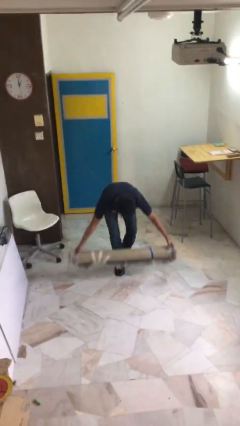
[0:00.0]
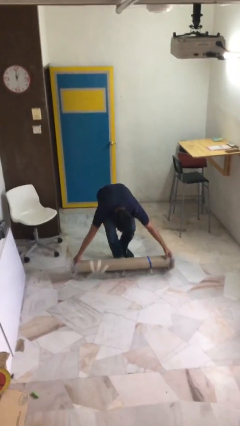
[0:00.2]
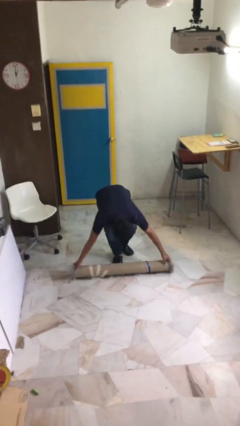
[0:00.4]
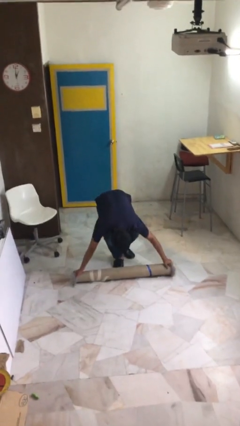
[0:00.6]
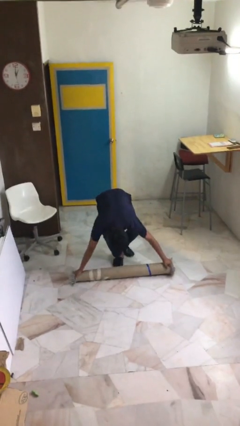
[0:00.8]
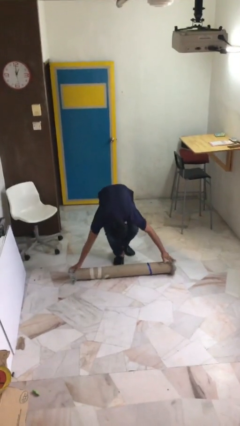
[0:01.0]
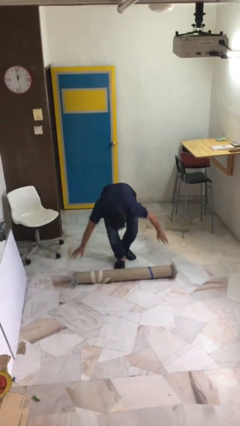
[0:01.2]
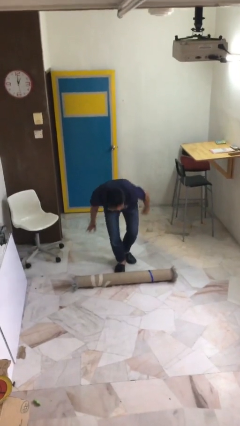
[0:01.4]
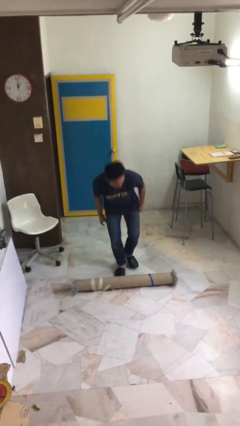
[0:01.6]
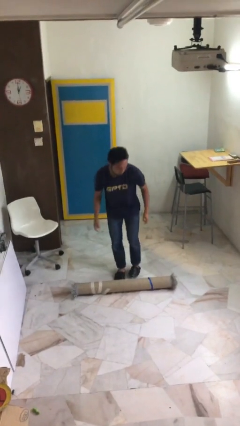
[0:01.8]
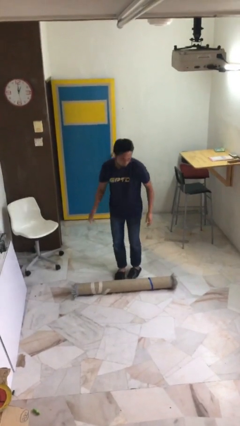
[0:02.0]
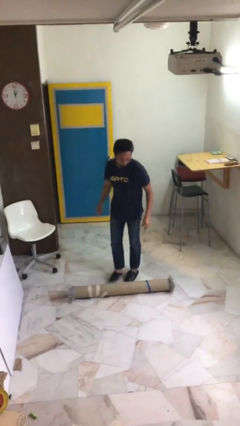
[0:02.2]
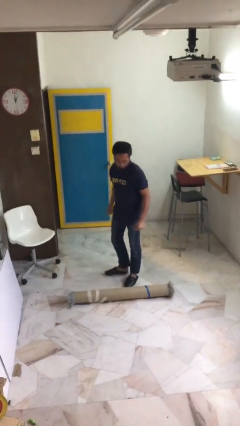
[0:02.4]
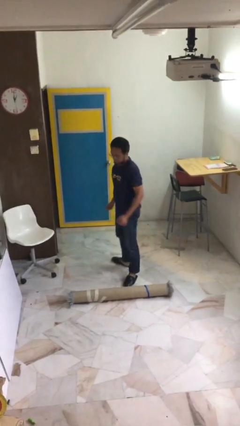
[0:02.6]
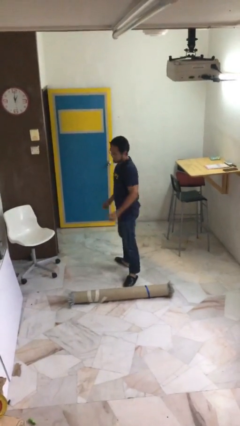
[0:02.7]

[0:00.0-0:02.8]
person puts down object on floor

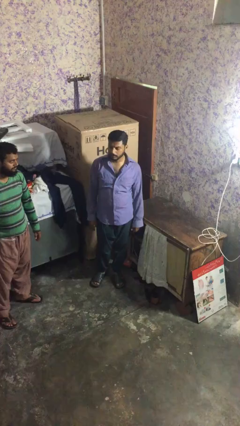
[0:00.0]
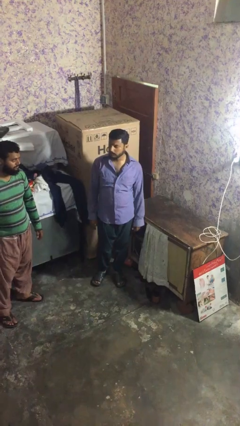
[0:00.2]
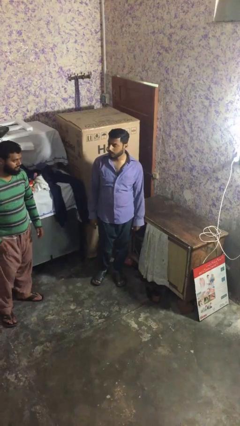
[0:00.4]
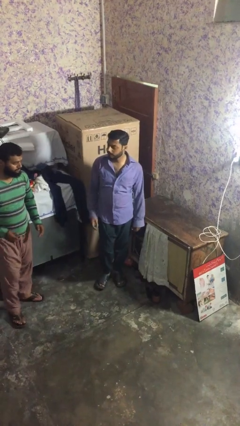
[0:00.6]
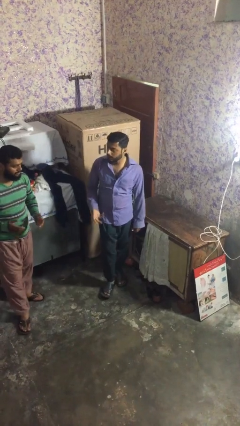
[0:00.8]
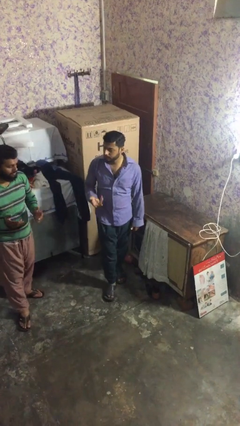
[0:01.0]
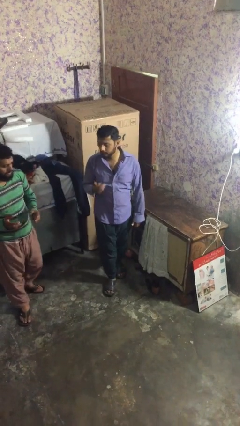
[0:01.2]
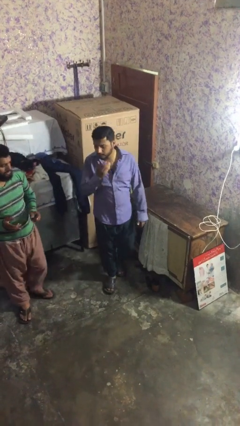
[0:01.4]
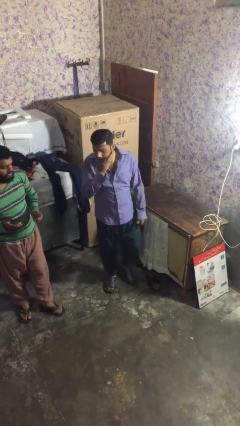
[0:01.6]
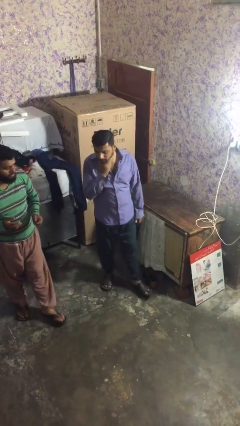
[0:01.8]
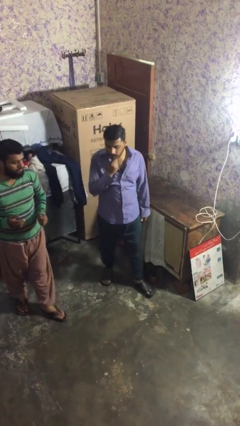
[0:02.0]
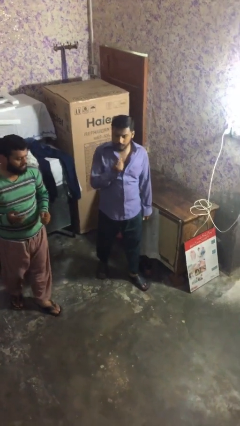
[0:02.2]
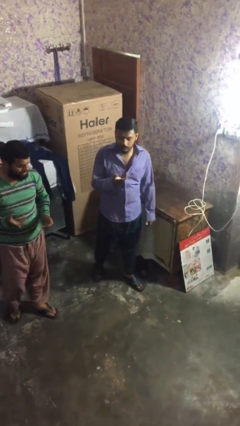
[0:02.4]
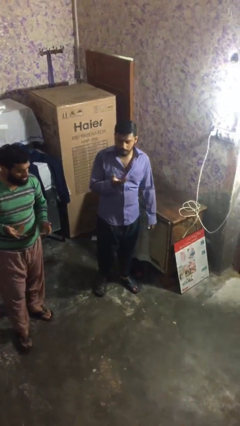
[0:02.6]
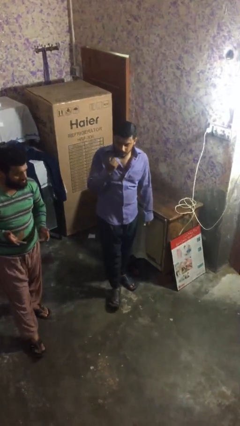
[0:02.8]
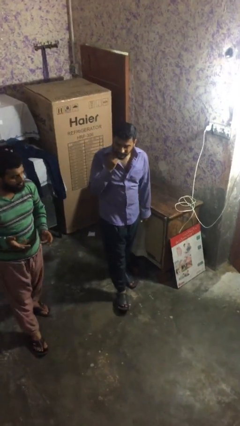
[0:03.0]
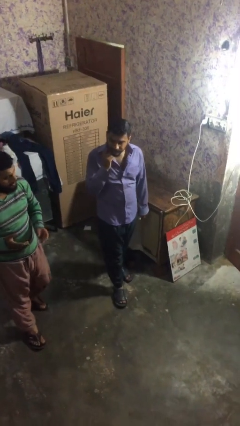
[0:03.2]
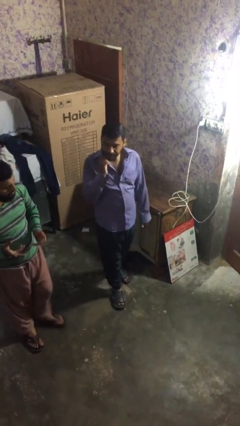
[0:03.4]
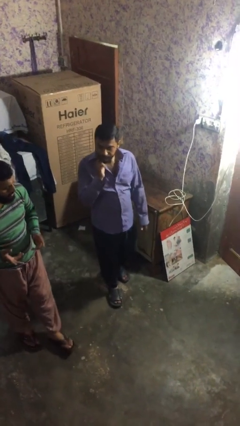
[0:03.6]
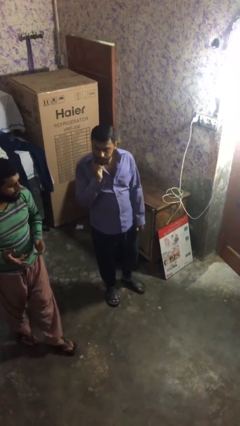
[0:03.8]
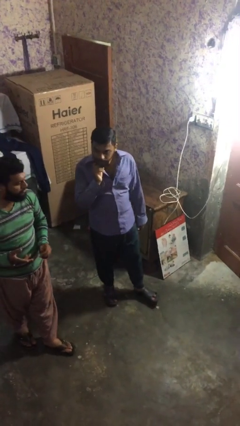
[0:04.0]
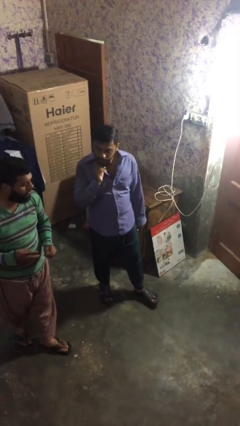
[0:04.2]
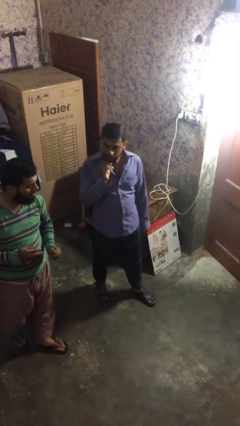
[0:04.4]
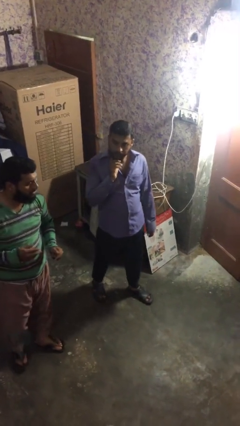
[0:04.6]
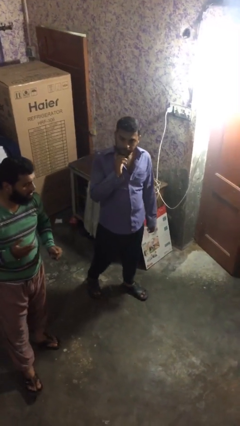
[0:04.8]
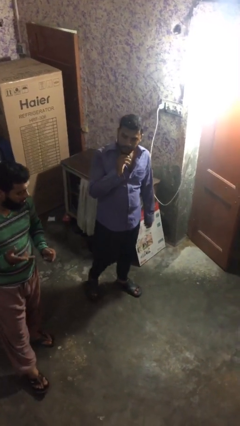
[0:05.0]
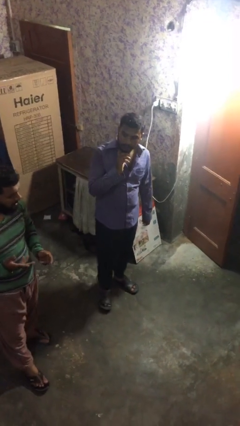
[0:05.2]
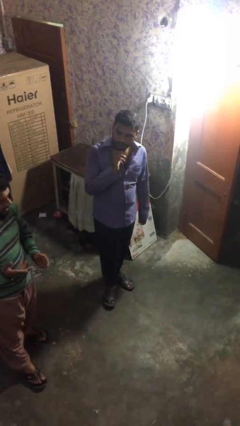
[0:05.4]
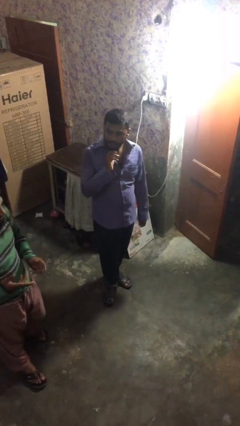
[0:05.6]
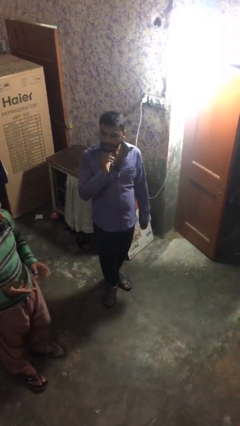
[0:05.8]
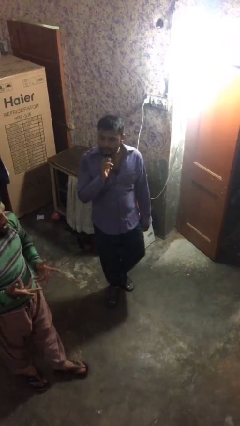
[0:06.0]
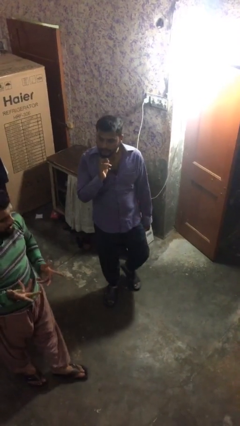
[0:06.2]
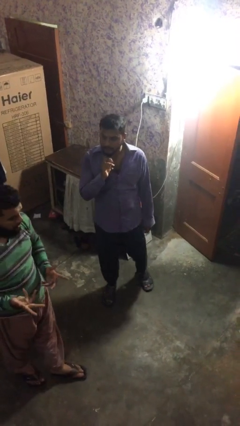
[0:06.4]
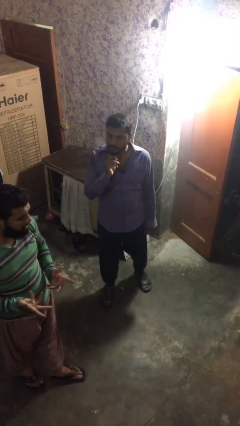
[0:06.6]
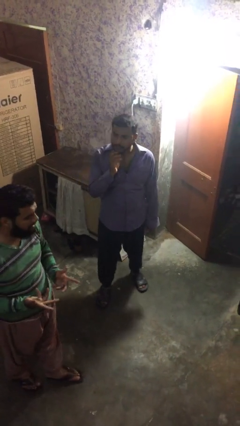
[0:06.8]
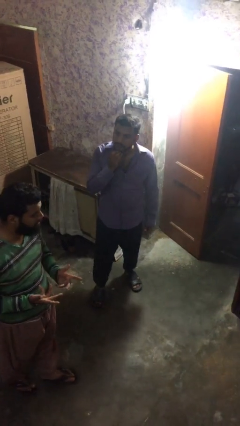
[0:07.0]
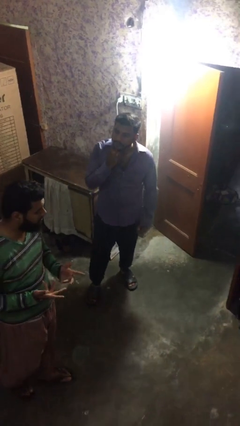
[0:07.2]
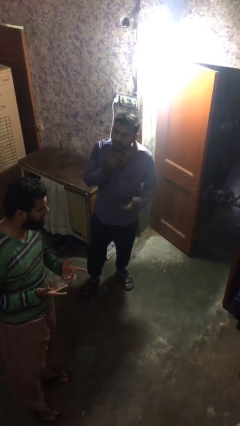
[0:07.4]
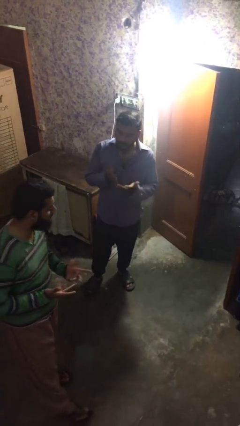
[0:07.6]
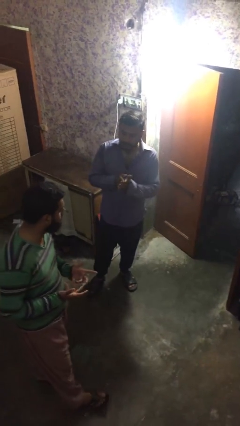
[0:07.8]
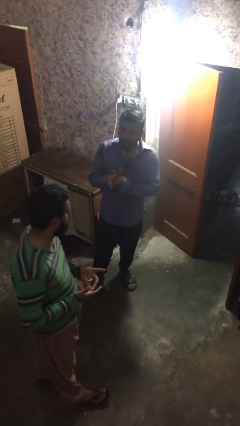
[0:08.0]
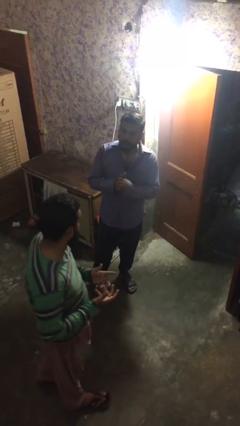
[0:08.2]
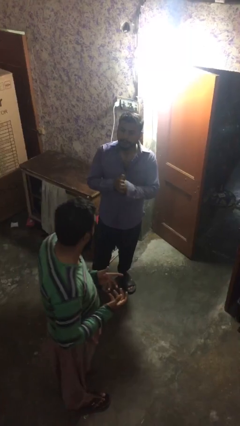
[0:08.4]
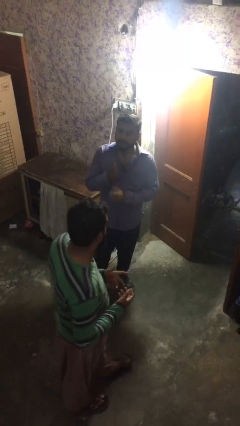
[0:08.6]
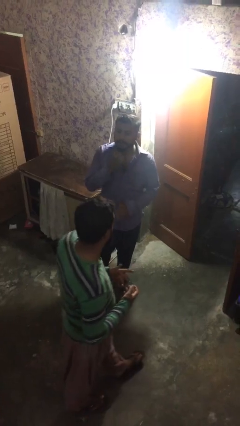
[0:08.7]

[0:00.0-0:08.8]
person talks to person

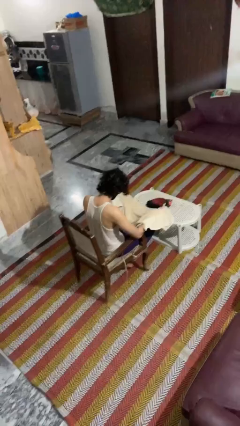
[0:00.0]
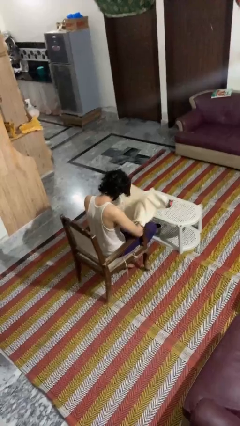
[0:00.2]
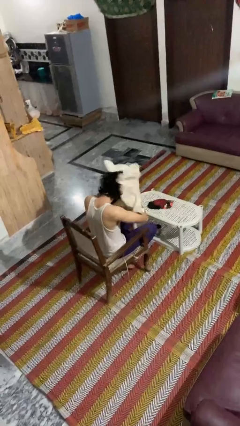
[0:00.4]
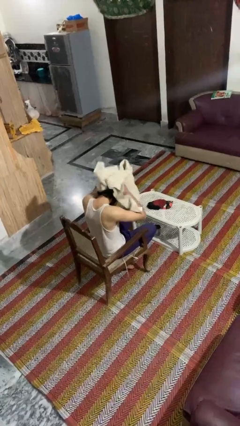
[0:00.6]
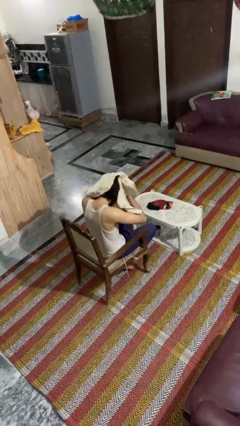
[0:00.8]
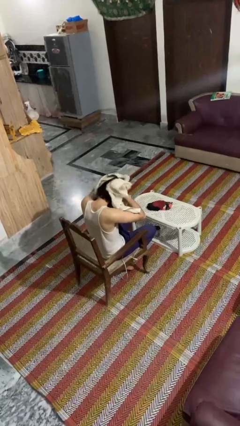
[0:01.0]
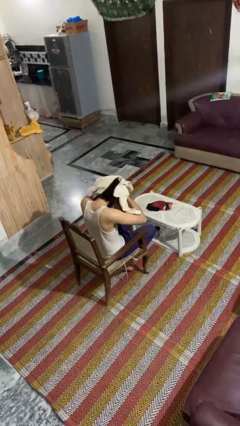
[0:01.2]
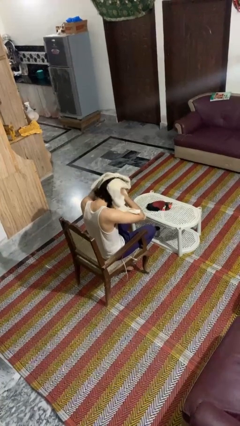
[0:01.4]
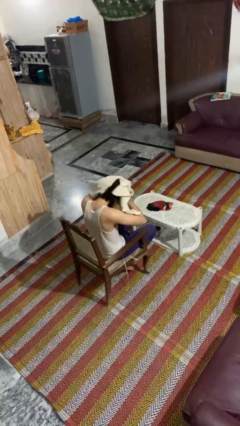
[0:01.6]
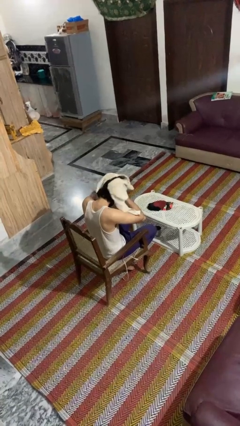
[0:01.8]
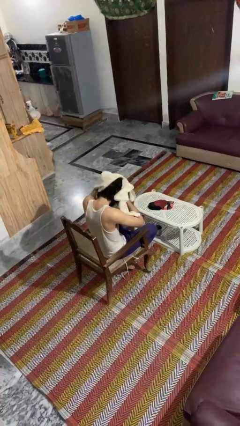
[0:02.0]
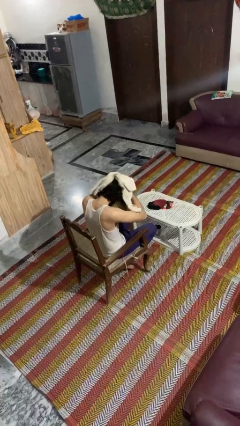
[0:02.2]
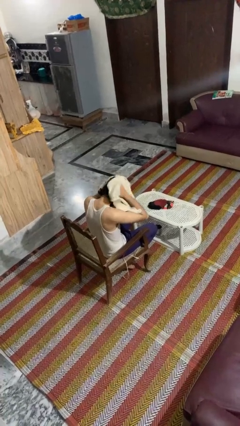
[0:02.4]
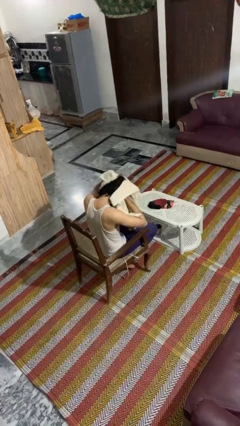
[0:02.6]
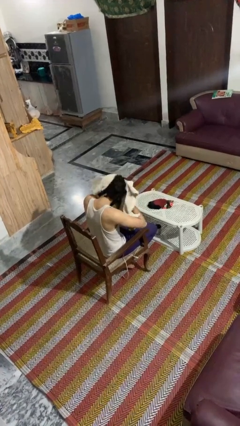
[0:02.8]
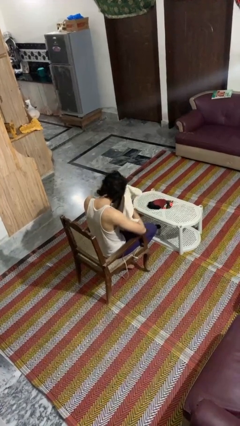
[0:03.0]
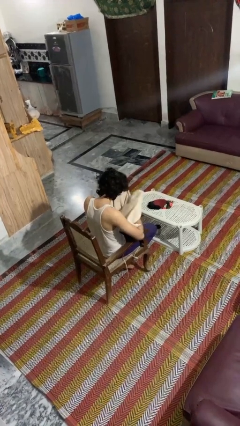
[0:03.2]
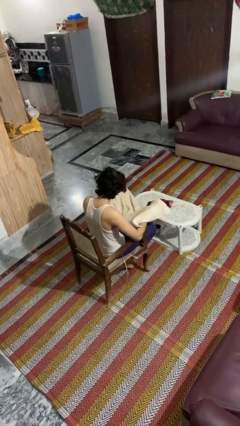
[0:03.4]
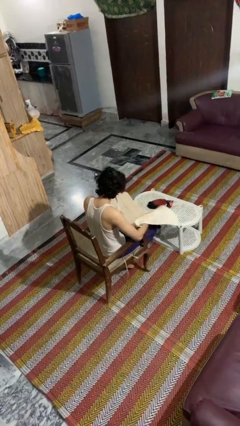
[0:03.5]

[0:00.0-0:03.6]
person dries hair with towel

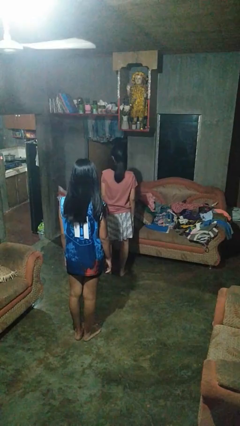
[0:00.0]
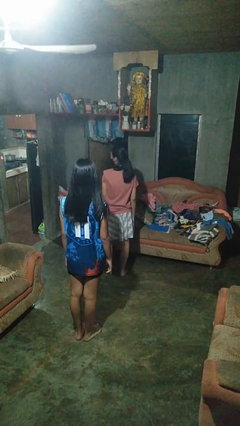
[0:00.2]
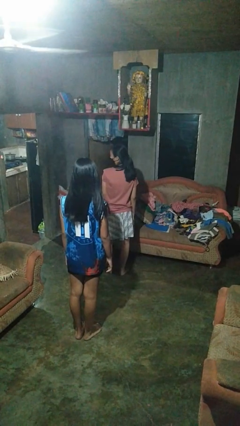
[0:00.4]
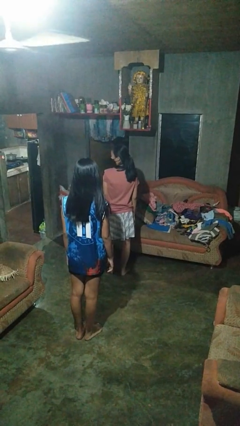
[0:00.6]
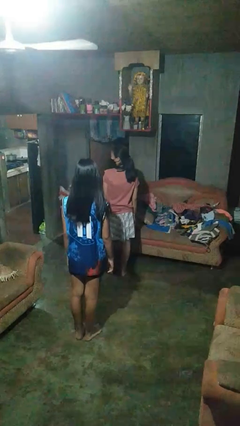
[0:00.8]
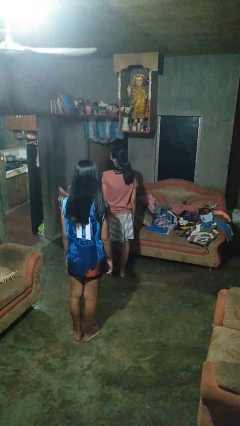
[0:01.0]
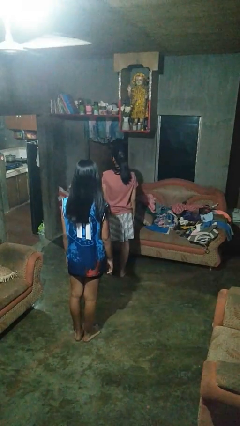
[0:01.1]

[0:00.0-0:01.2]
person looks over shoulder

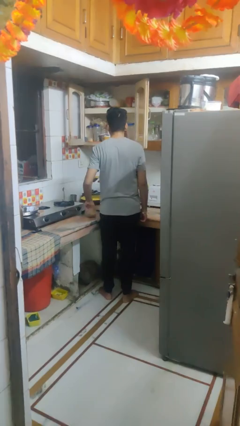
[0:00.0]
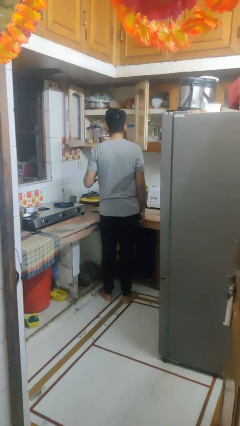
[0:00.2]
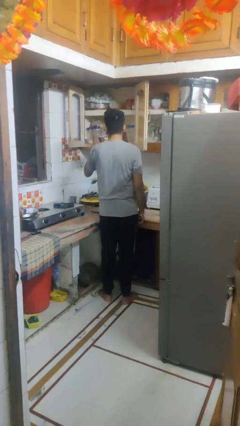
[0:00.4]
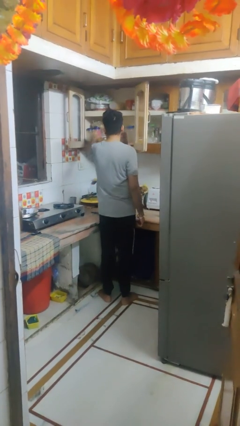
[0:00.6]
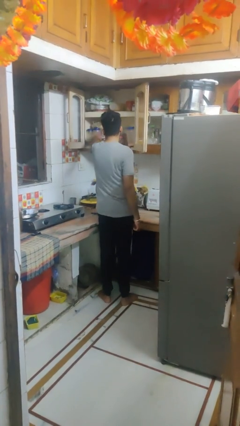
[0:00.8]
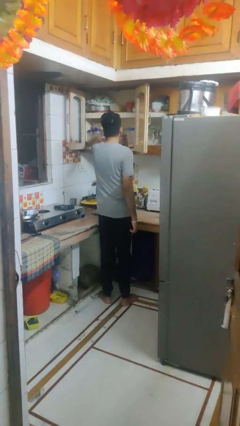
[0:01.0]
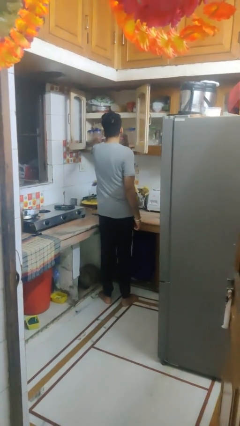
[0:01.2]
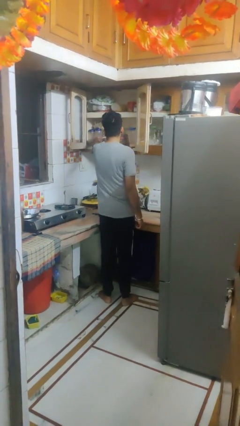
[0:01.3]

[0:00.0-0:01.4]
person puts object in cabinet
